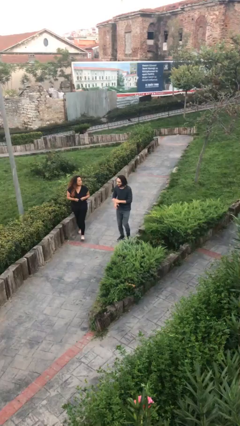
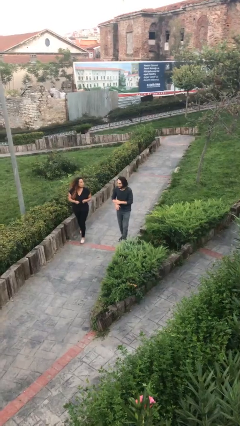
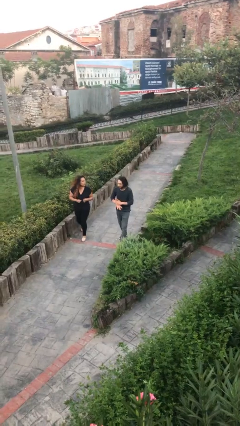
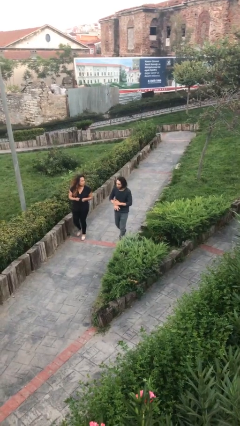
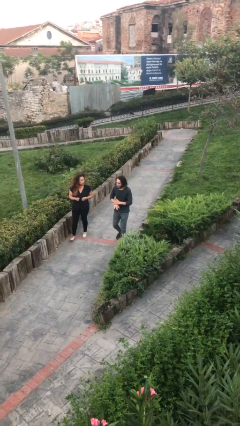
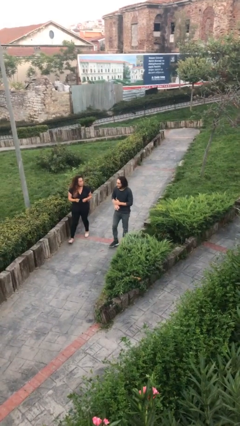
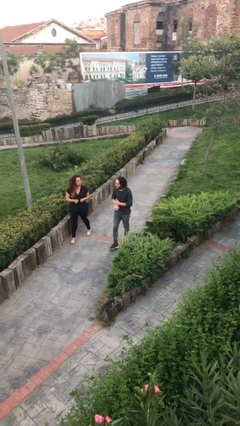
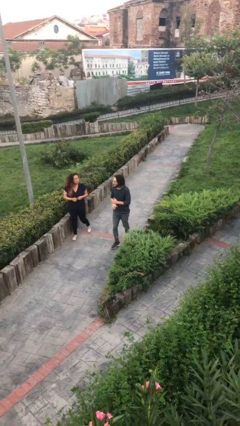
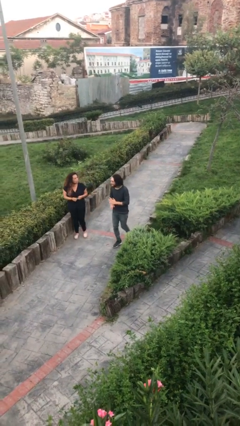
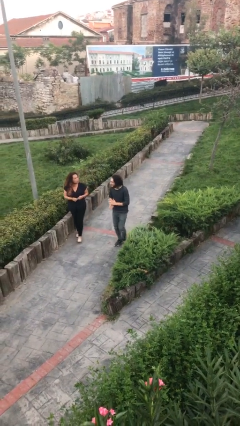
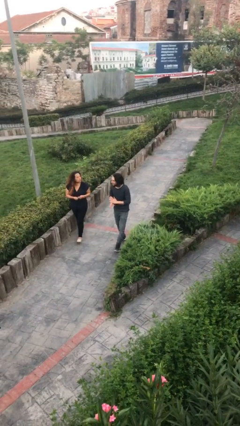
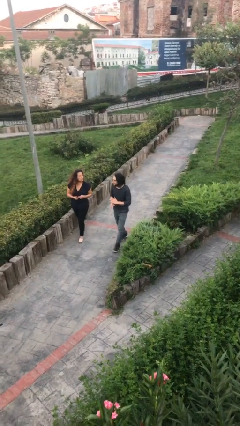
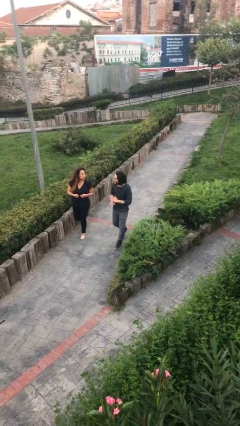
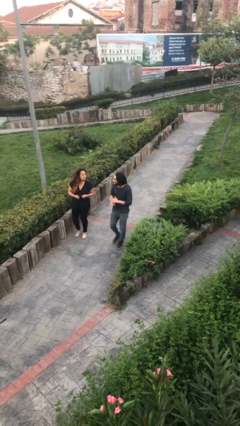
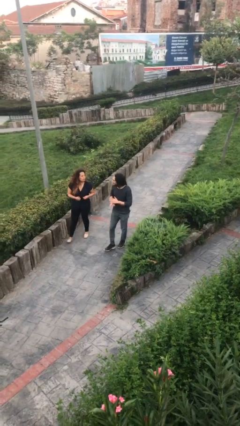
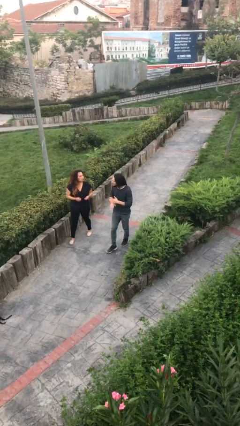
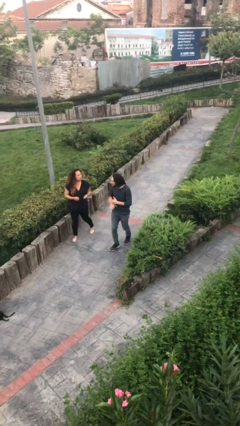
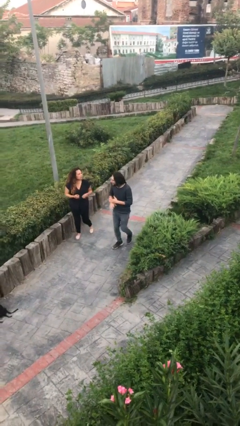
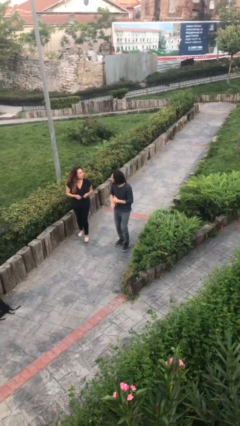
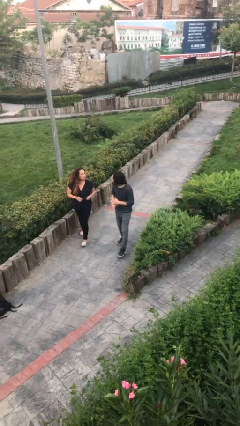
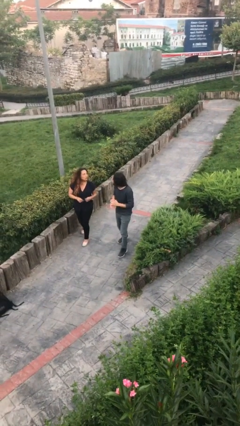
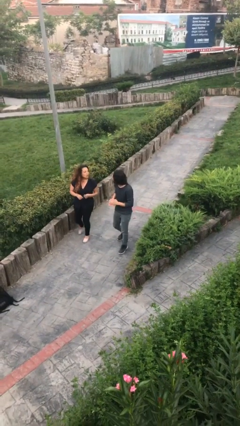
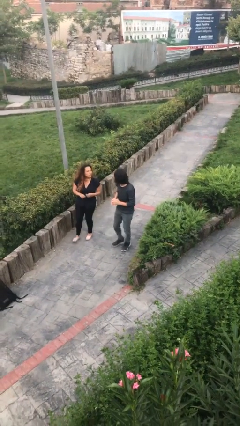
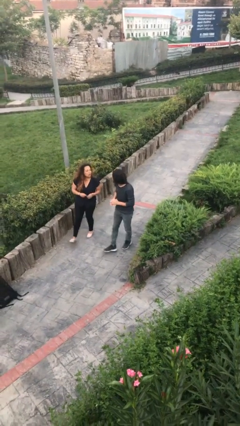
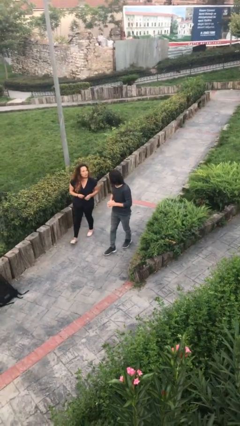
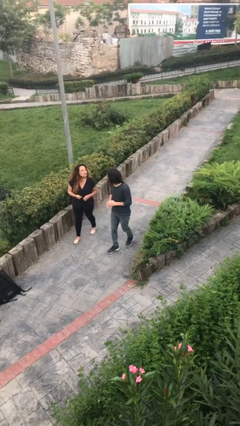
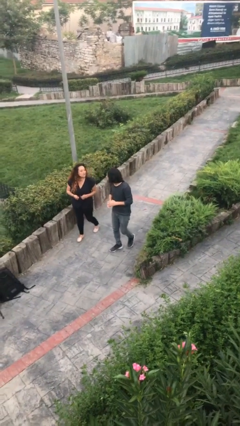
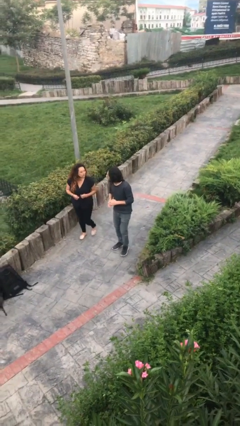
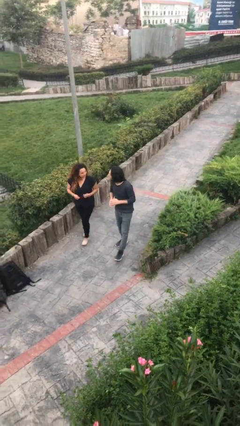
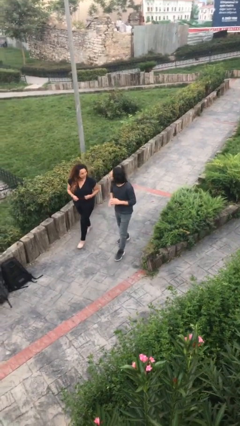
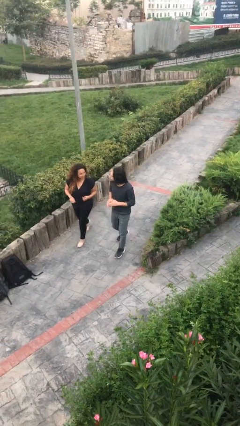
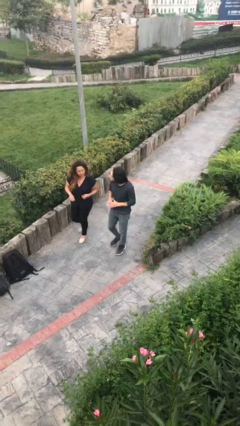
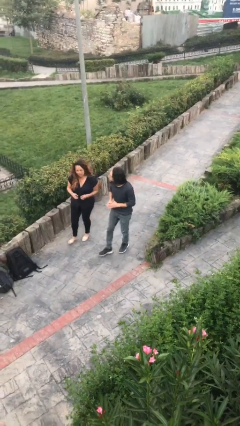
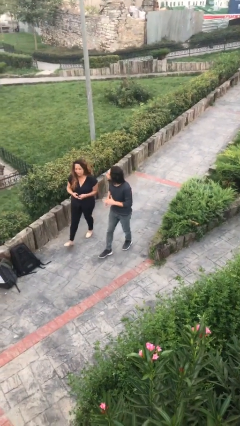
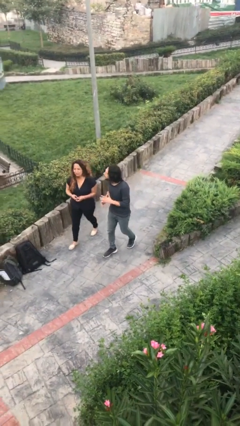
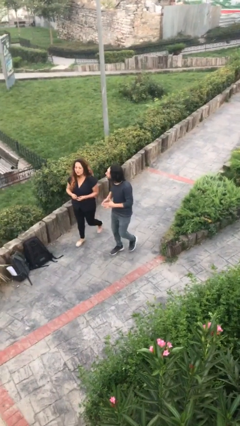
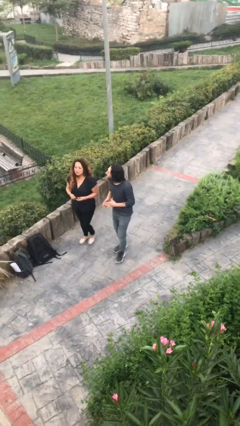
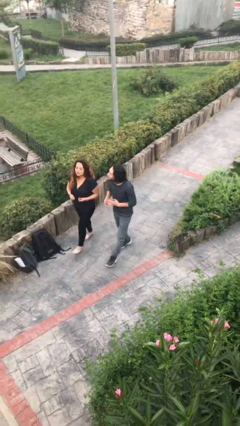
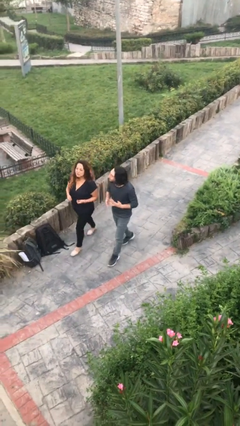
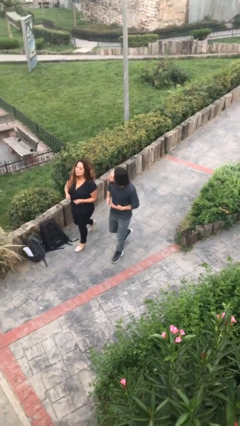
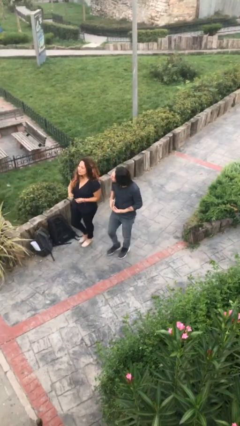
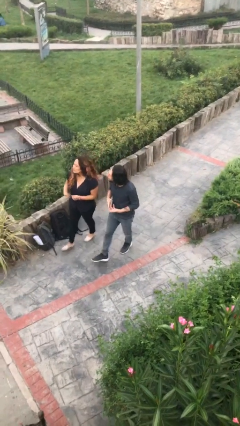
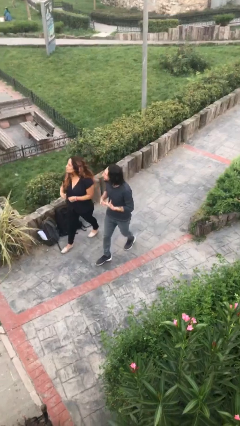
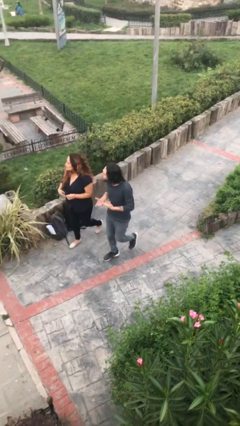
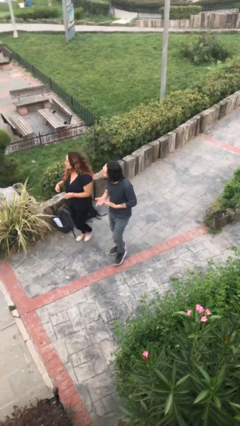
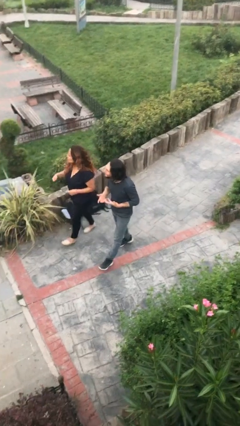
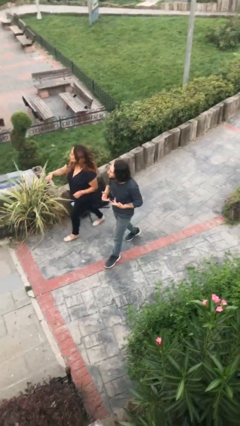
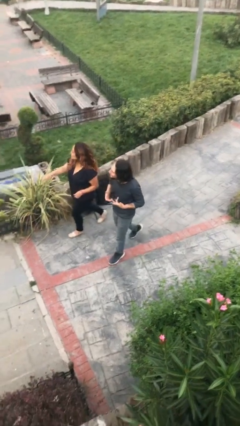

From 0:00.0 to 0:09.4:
person talks to person

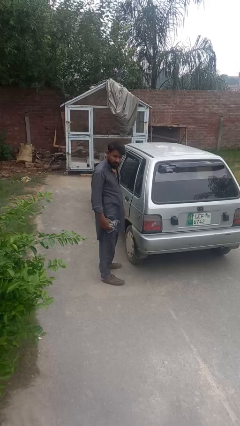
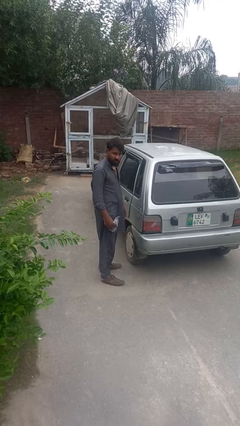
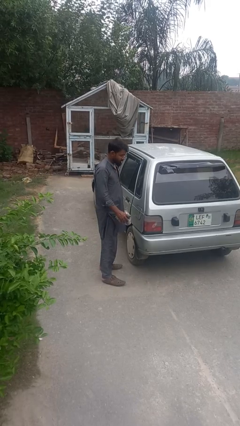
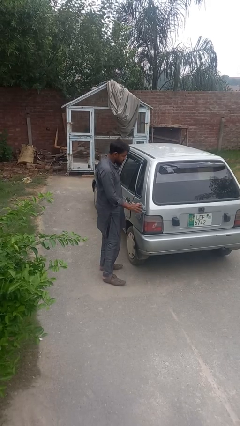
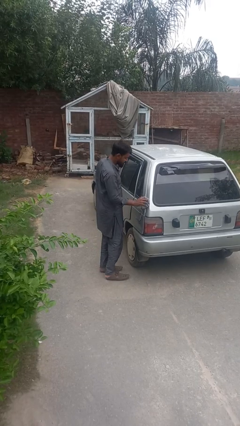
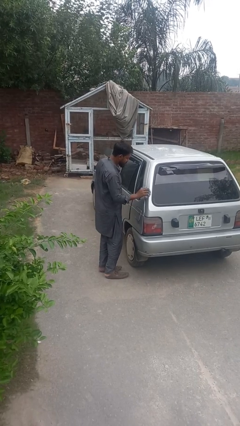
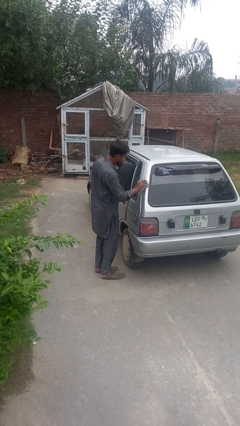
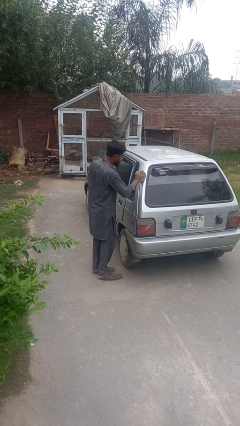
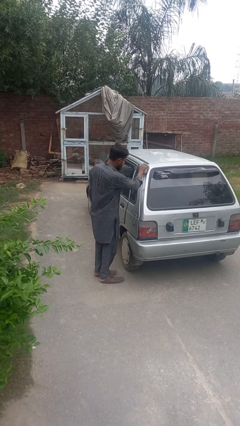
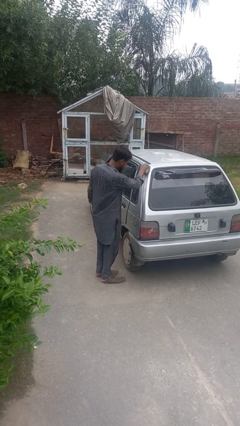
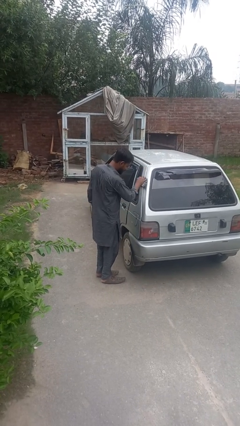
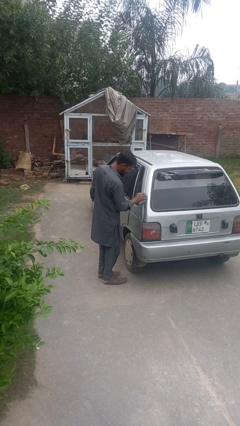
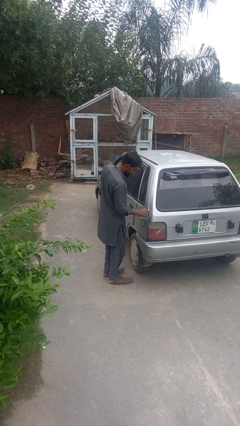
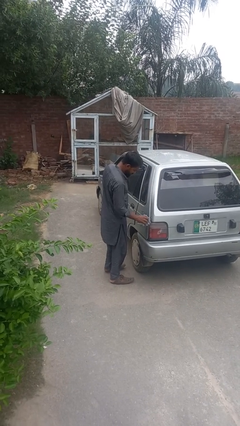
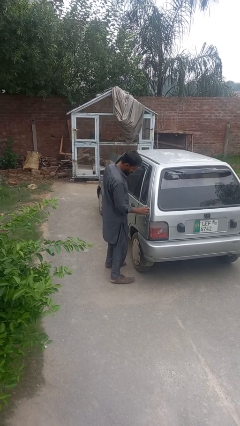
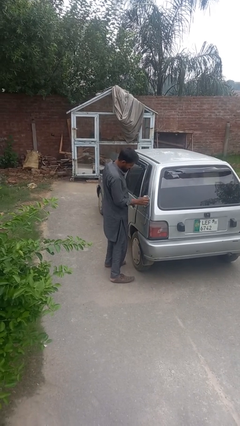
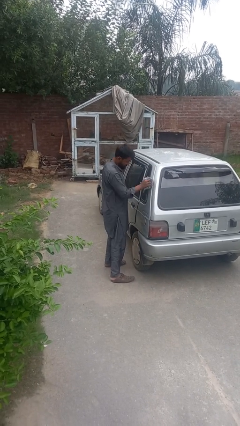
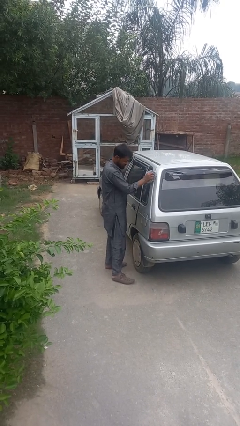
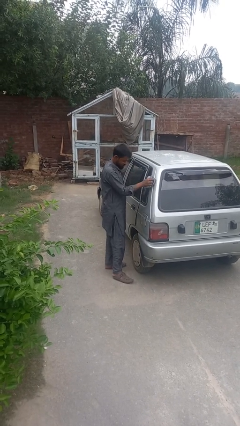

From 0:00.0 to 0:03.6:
person polishes car with rag

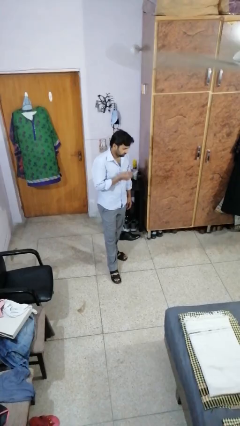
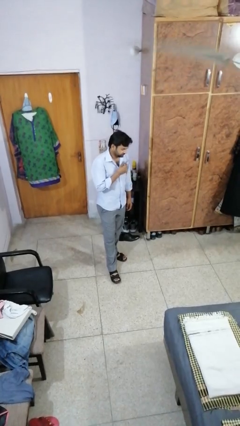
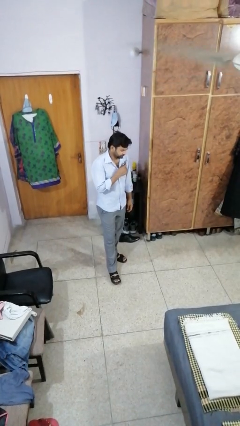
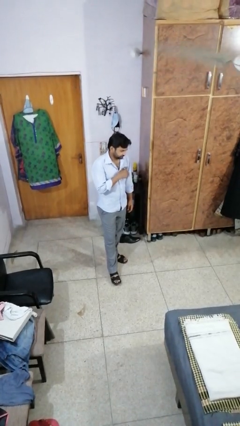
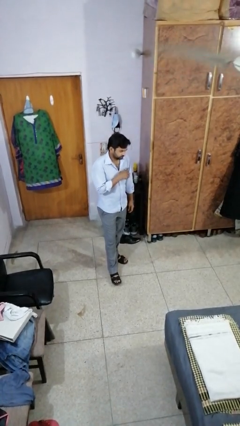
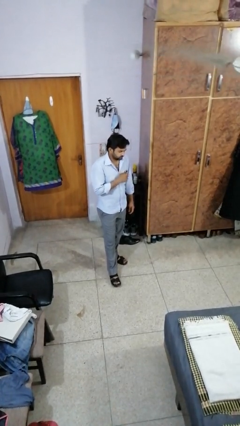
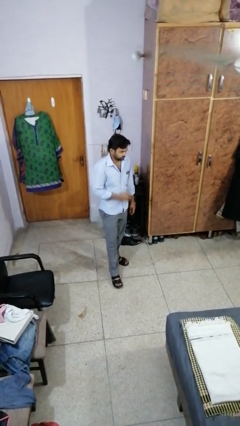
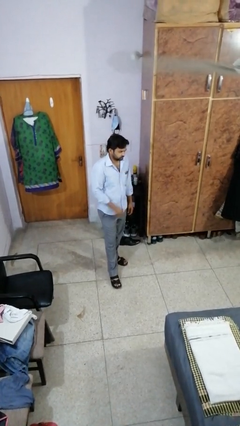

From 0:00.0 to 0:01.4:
person puts phone into pocket

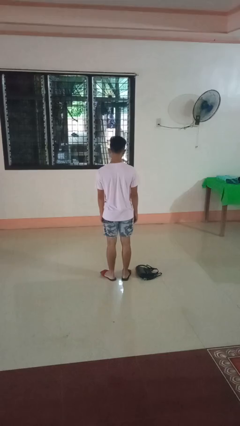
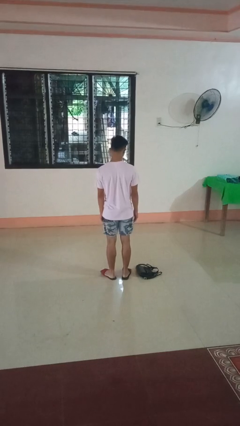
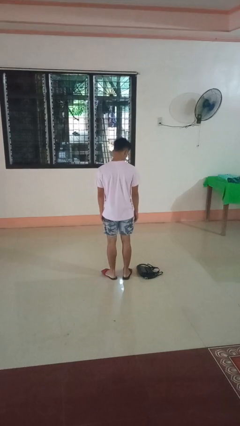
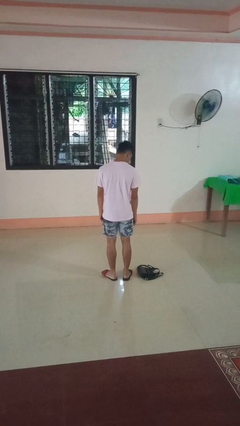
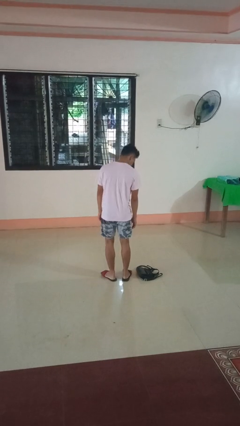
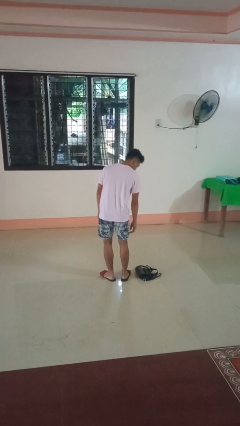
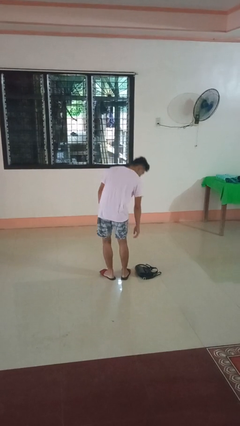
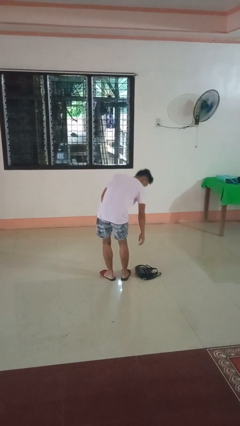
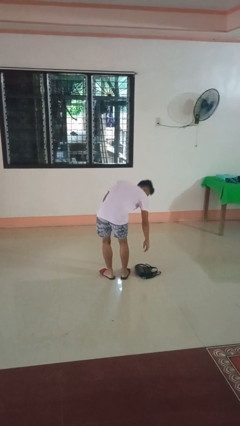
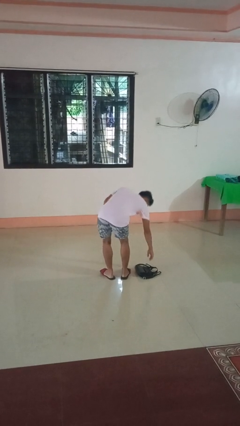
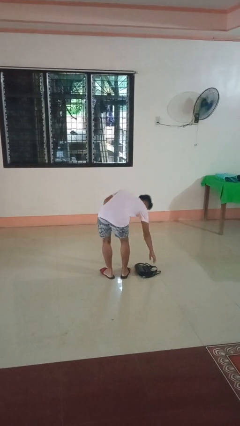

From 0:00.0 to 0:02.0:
person drops object

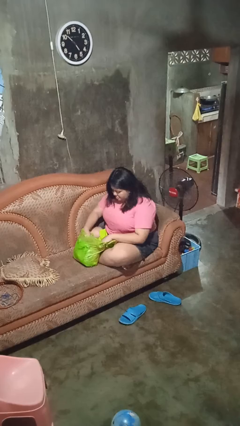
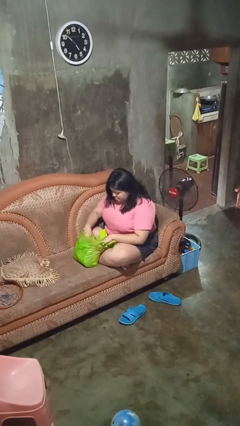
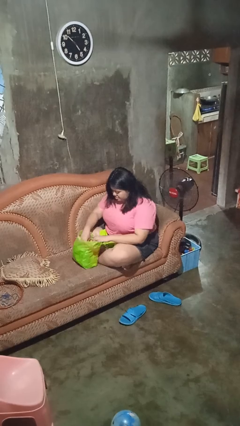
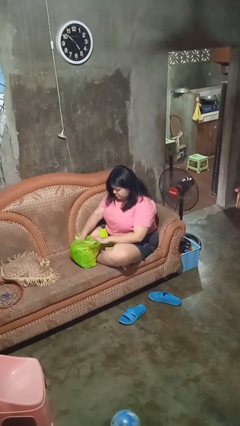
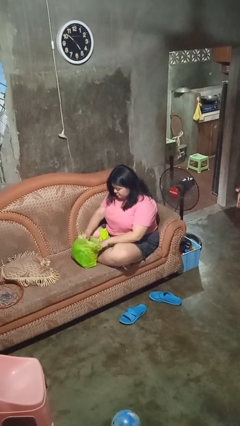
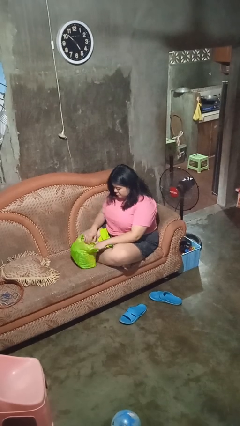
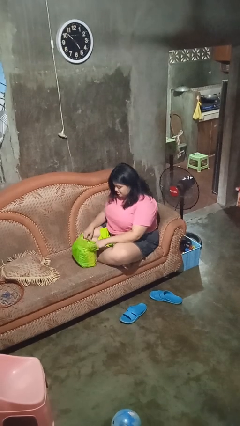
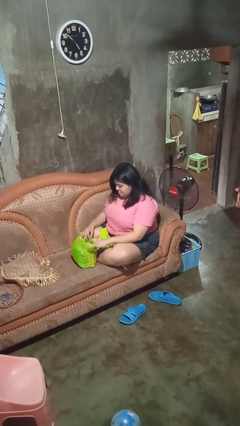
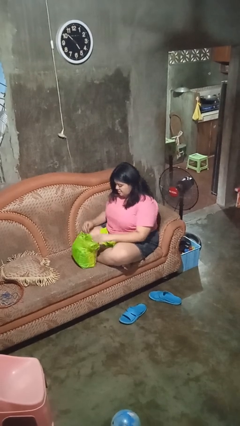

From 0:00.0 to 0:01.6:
person searches in bag
